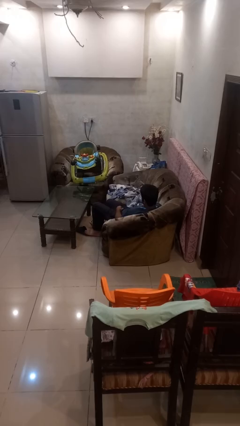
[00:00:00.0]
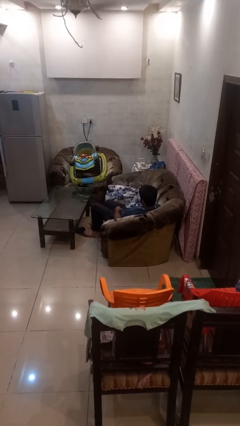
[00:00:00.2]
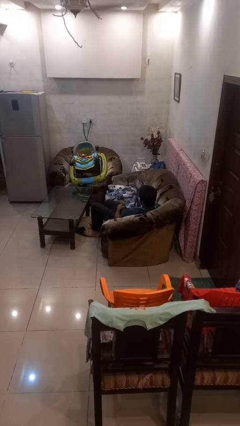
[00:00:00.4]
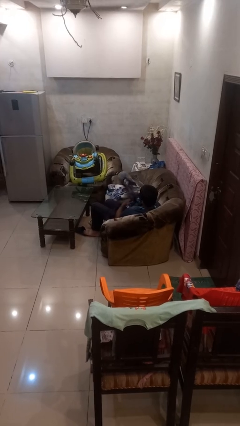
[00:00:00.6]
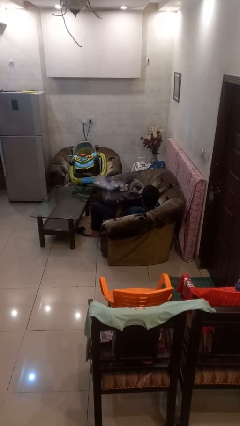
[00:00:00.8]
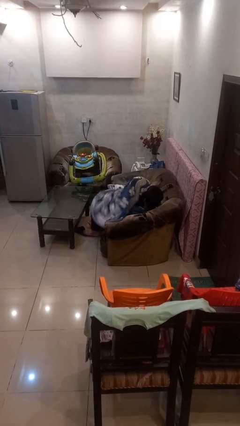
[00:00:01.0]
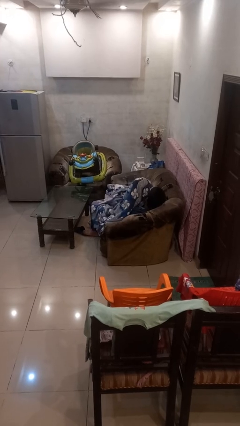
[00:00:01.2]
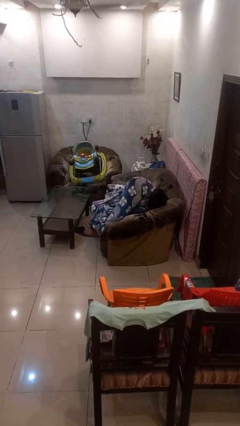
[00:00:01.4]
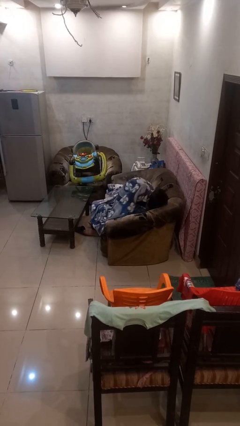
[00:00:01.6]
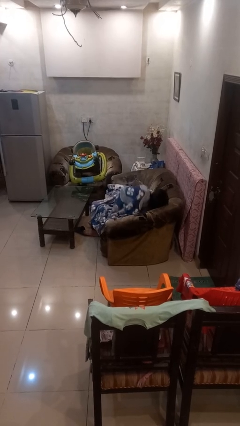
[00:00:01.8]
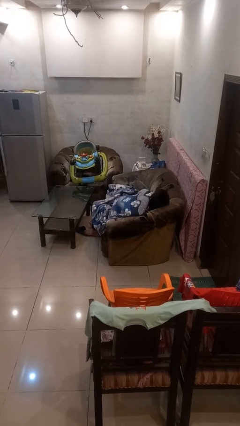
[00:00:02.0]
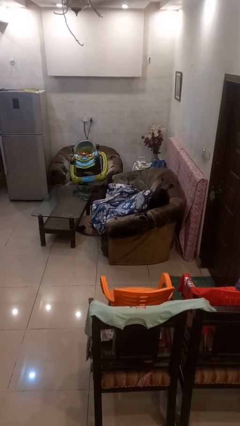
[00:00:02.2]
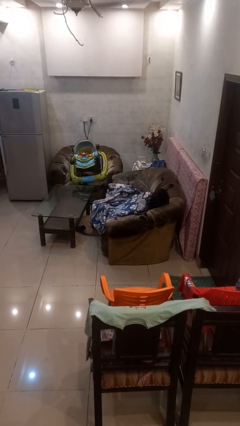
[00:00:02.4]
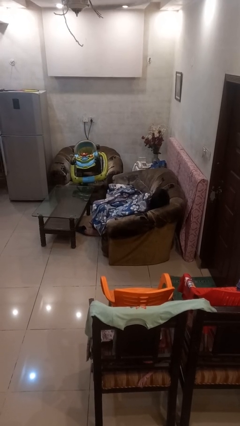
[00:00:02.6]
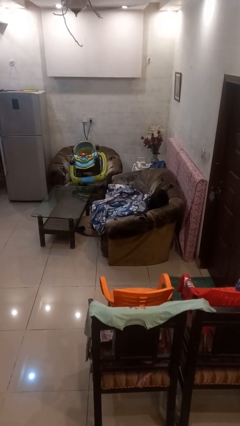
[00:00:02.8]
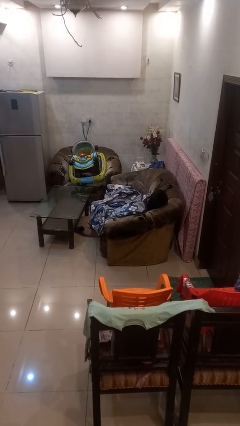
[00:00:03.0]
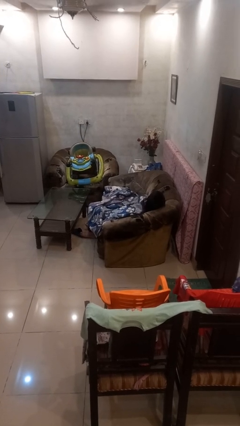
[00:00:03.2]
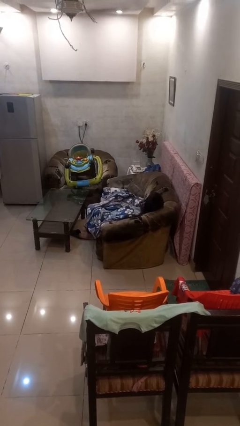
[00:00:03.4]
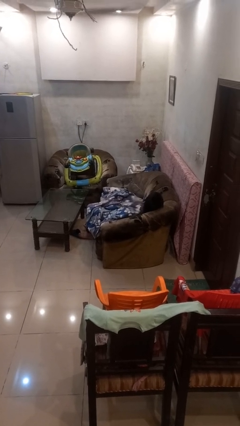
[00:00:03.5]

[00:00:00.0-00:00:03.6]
person covers with blanket

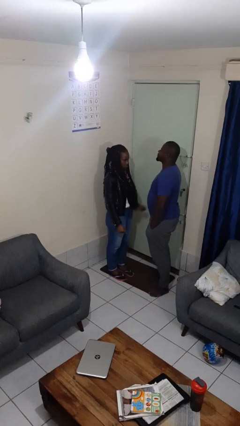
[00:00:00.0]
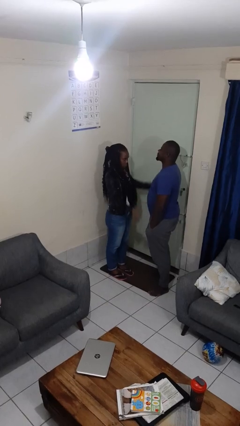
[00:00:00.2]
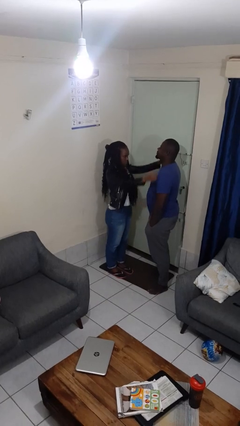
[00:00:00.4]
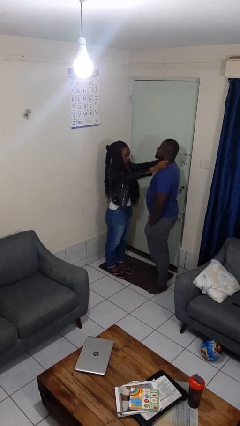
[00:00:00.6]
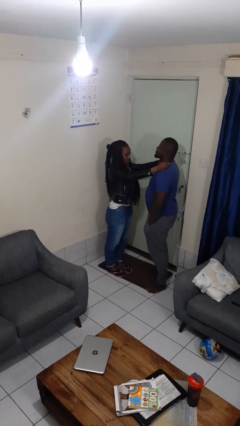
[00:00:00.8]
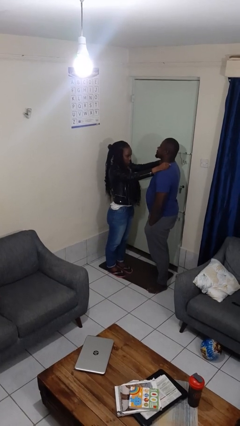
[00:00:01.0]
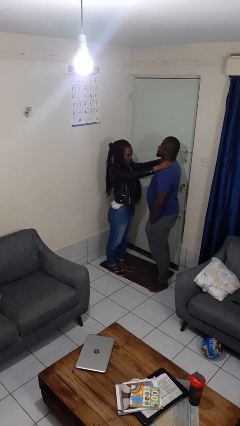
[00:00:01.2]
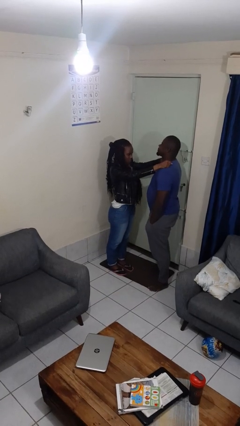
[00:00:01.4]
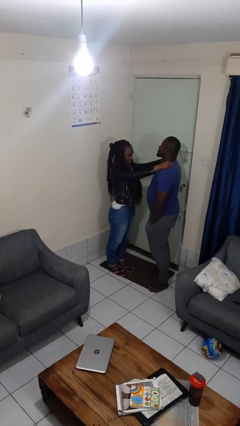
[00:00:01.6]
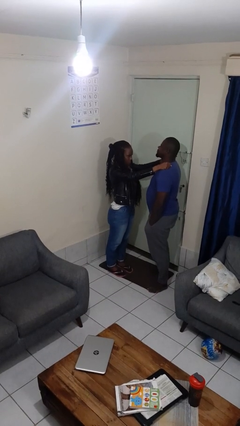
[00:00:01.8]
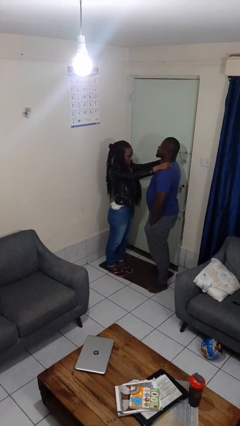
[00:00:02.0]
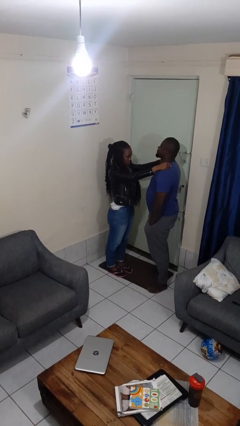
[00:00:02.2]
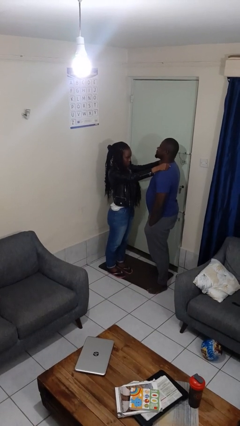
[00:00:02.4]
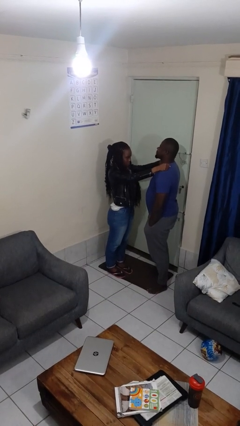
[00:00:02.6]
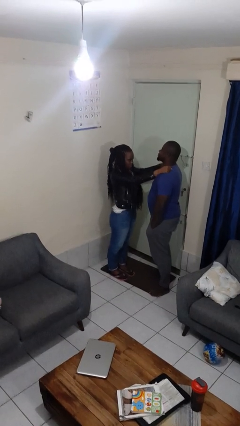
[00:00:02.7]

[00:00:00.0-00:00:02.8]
person pounds shoulders of person

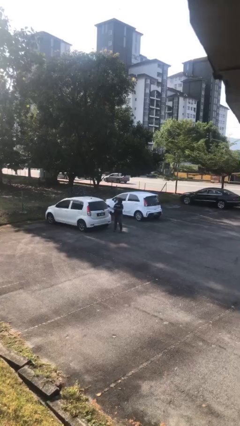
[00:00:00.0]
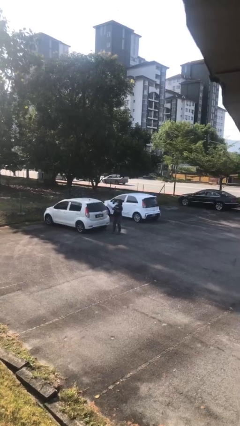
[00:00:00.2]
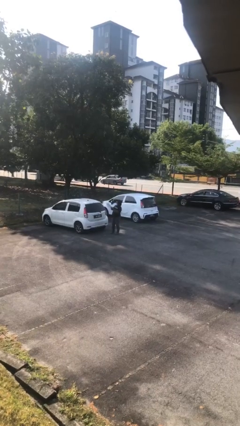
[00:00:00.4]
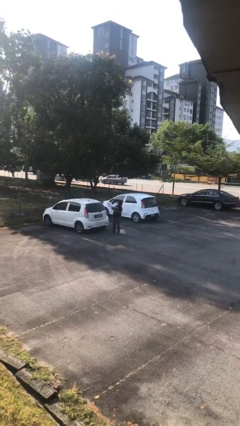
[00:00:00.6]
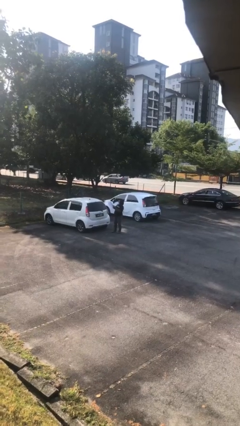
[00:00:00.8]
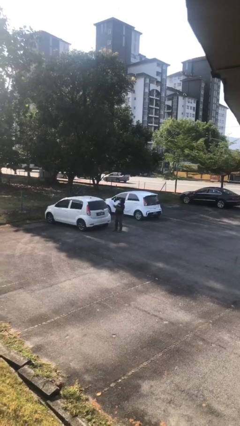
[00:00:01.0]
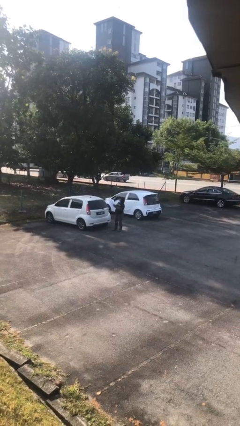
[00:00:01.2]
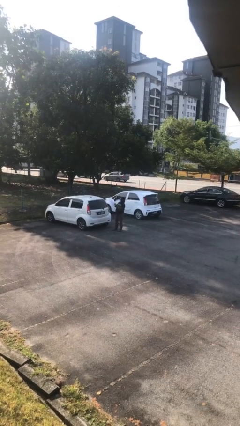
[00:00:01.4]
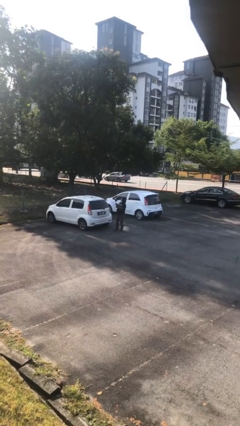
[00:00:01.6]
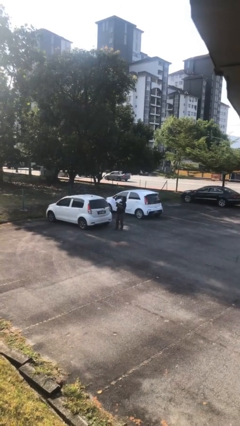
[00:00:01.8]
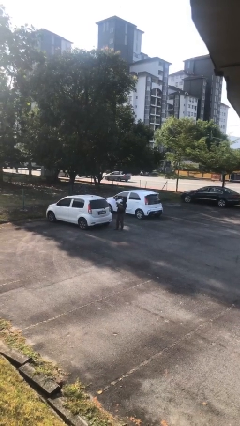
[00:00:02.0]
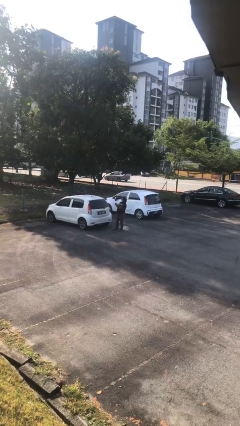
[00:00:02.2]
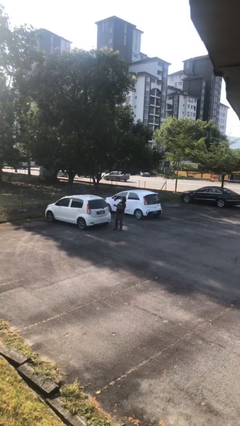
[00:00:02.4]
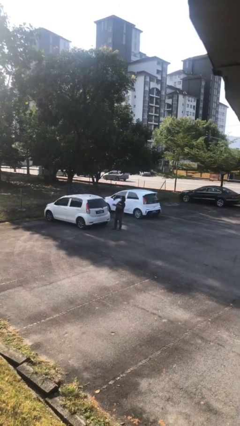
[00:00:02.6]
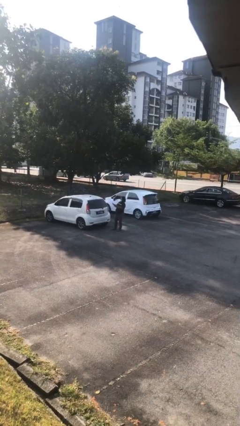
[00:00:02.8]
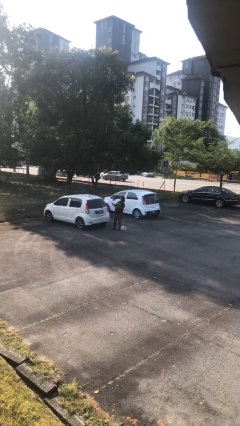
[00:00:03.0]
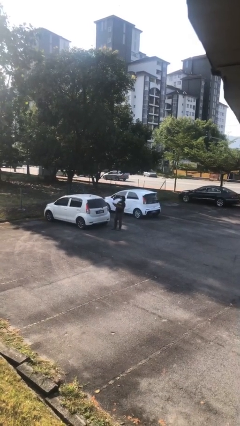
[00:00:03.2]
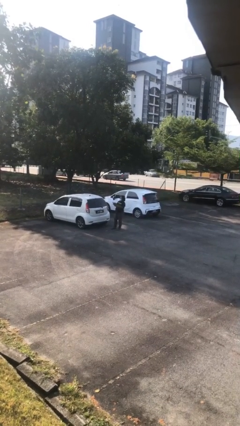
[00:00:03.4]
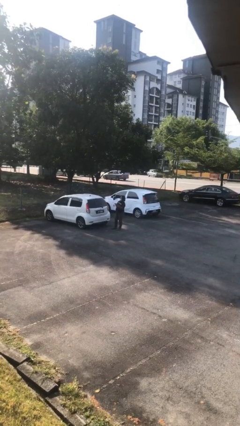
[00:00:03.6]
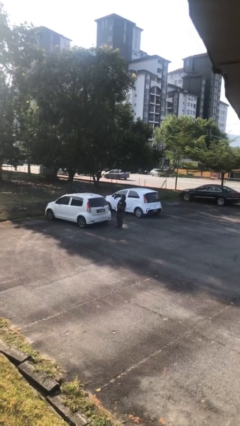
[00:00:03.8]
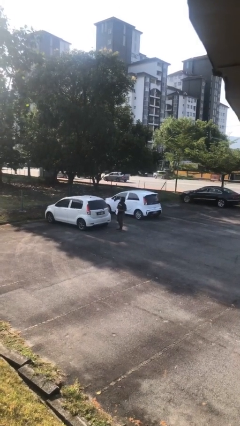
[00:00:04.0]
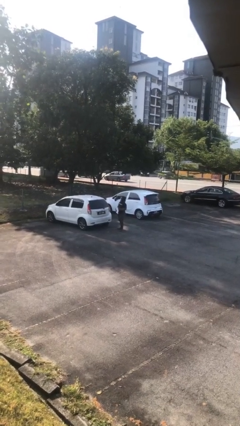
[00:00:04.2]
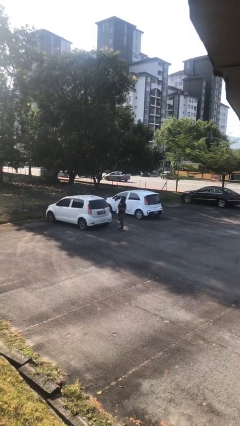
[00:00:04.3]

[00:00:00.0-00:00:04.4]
person reads document

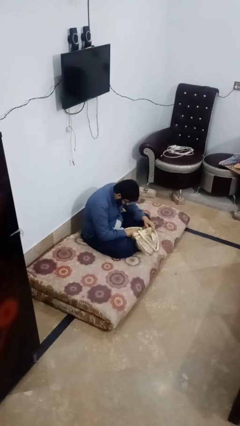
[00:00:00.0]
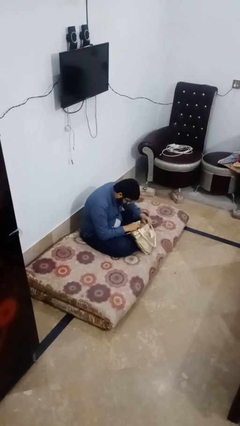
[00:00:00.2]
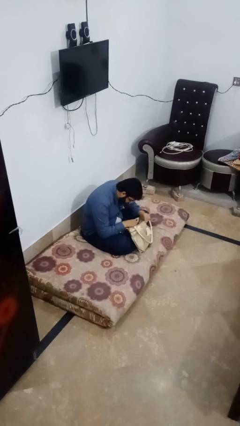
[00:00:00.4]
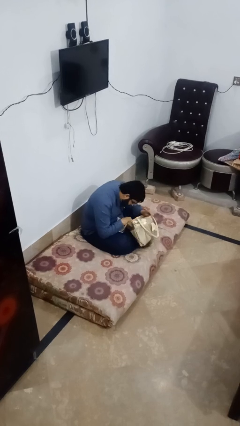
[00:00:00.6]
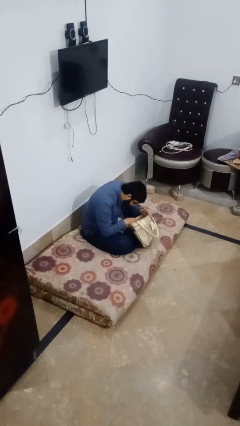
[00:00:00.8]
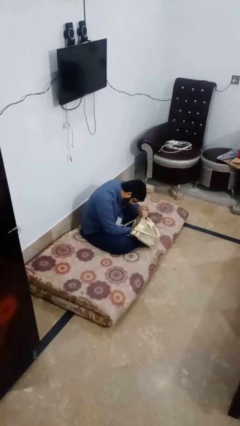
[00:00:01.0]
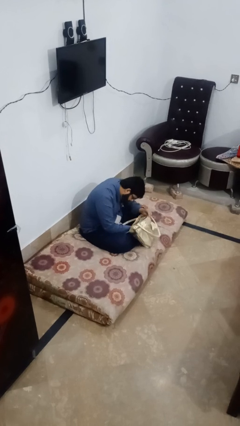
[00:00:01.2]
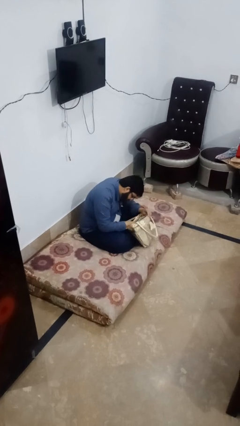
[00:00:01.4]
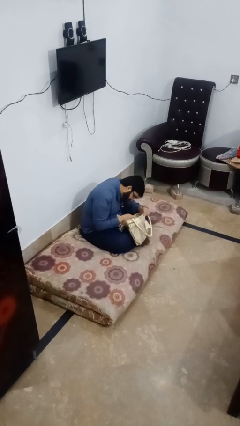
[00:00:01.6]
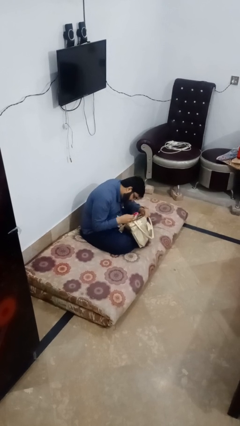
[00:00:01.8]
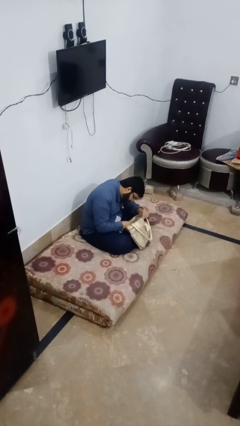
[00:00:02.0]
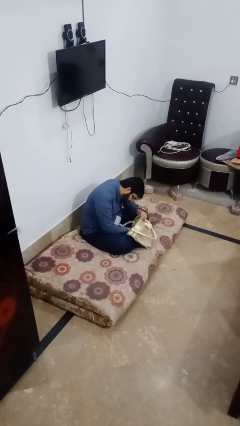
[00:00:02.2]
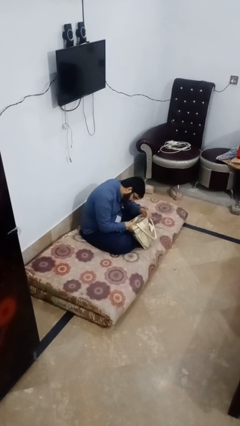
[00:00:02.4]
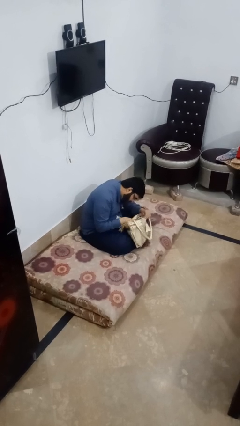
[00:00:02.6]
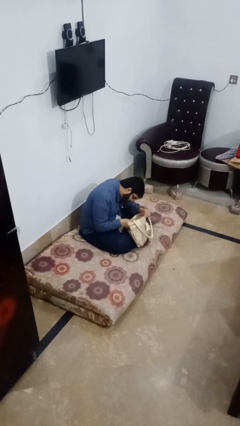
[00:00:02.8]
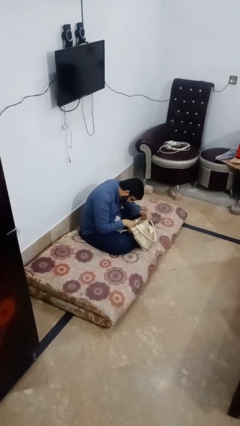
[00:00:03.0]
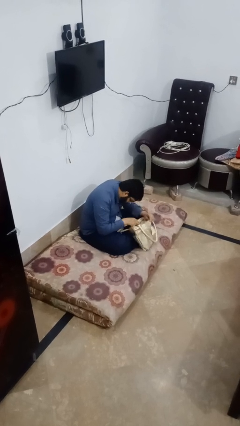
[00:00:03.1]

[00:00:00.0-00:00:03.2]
person searches in bag

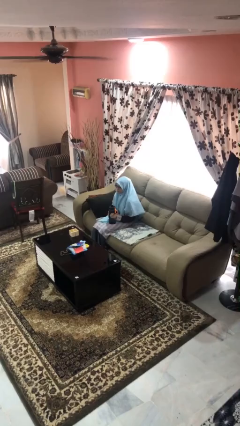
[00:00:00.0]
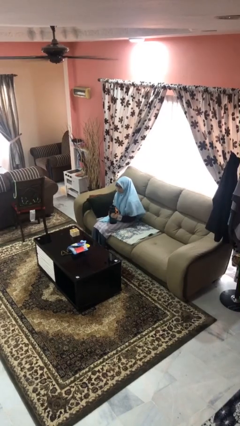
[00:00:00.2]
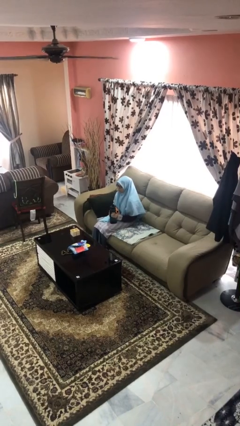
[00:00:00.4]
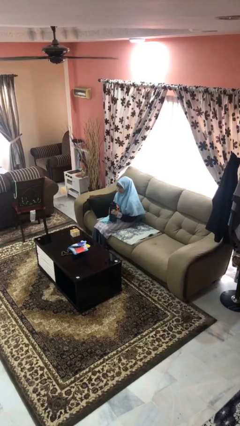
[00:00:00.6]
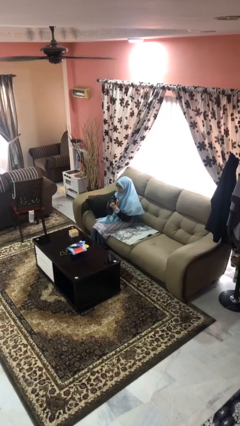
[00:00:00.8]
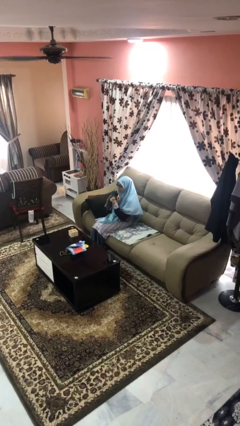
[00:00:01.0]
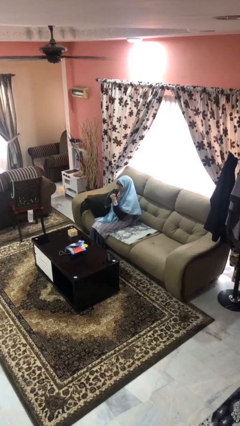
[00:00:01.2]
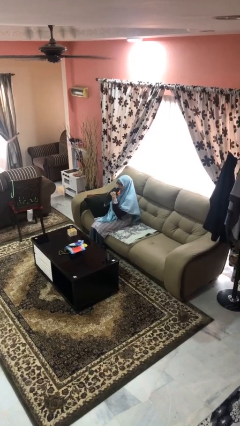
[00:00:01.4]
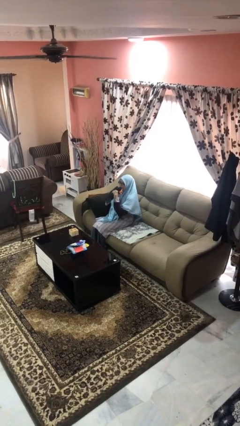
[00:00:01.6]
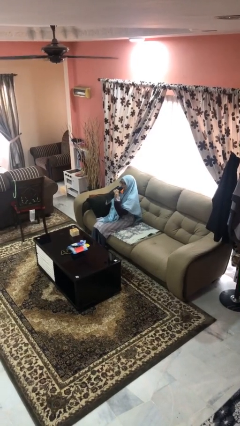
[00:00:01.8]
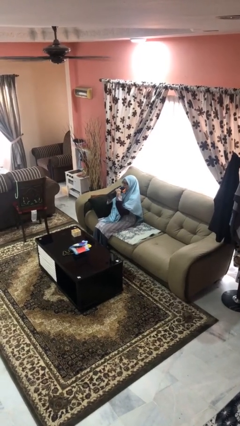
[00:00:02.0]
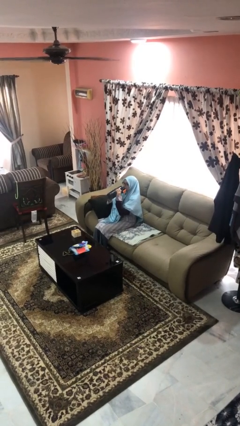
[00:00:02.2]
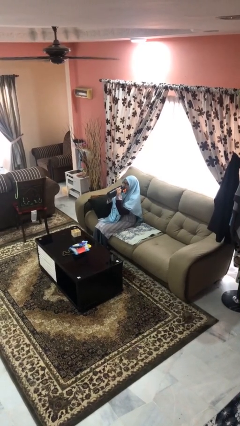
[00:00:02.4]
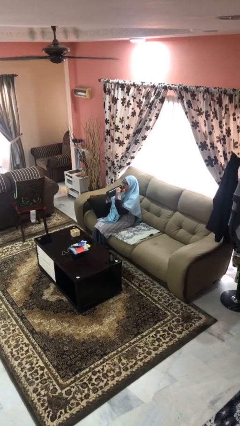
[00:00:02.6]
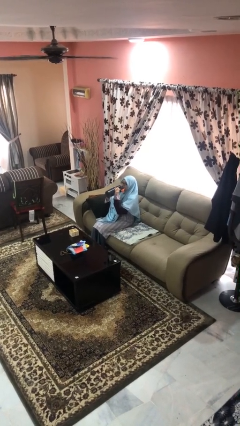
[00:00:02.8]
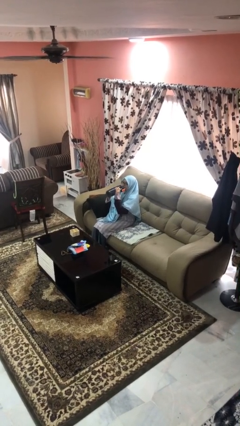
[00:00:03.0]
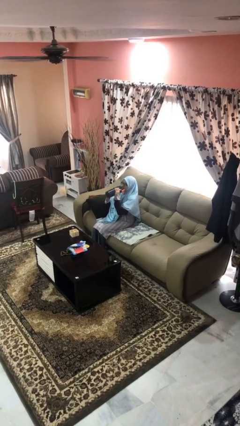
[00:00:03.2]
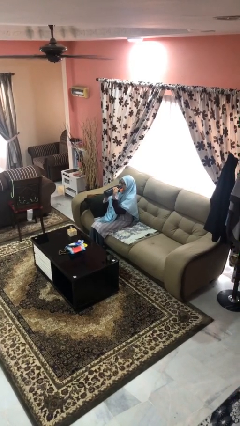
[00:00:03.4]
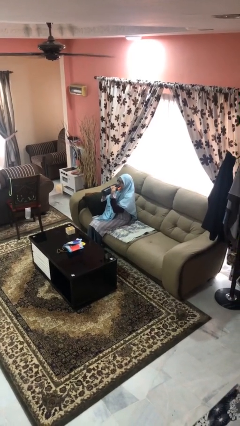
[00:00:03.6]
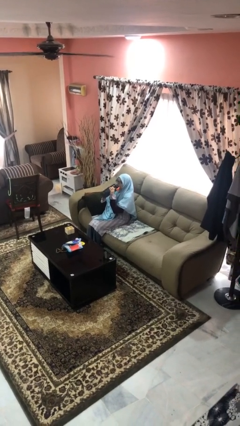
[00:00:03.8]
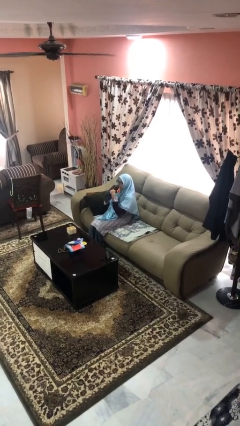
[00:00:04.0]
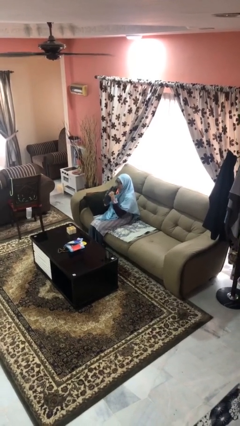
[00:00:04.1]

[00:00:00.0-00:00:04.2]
person drinks from bottle
